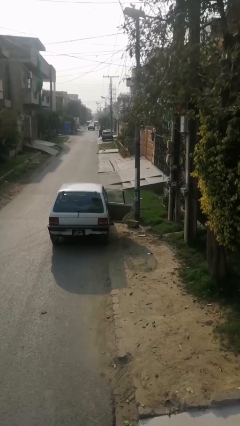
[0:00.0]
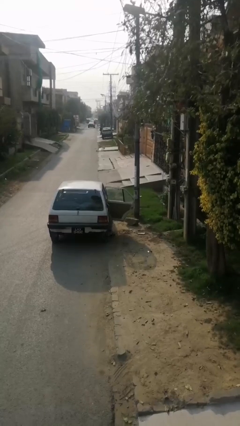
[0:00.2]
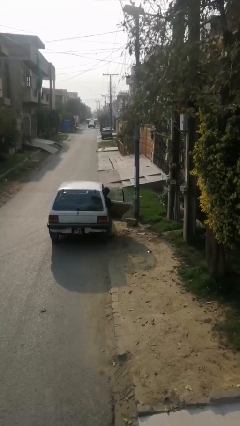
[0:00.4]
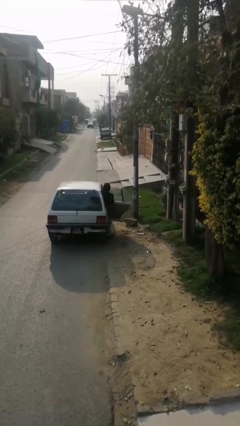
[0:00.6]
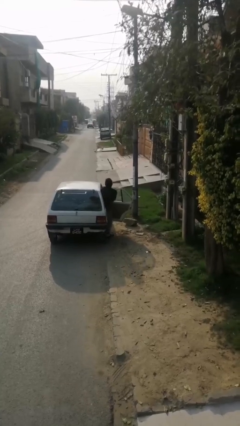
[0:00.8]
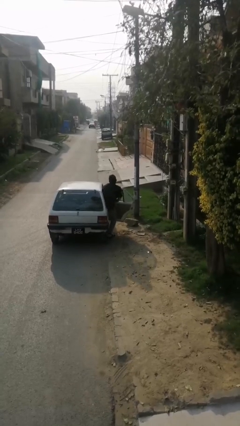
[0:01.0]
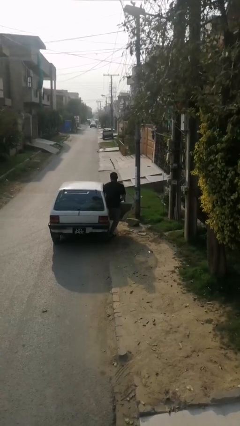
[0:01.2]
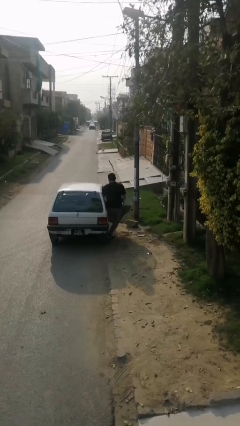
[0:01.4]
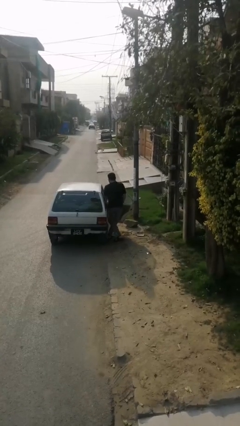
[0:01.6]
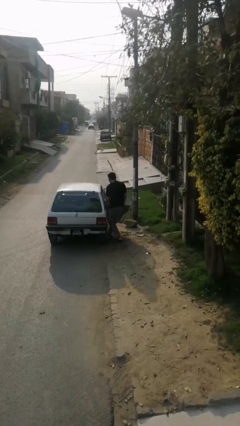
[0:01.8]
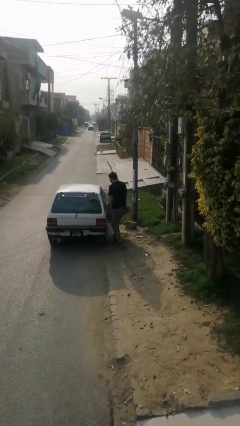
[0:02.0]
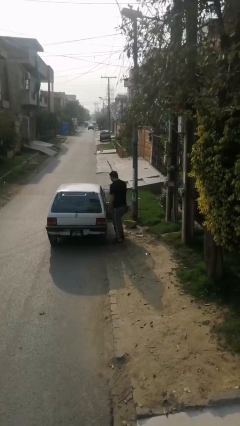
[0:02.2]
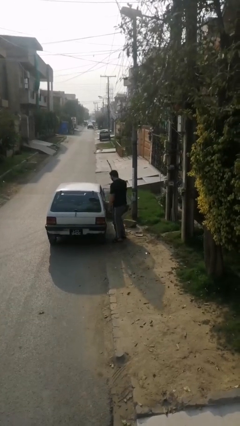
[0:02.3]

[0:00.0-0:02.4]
person exits car

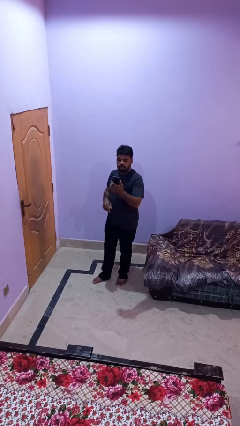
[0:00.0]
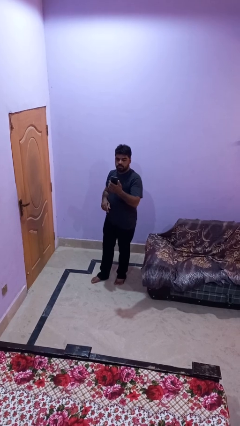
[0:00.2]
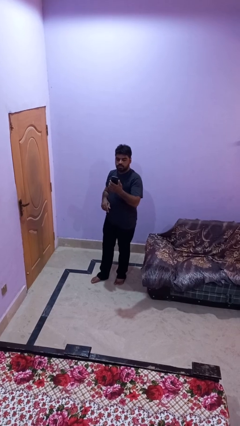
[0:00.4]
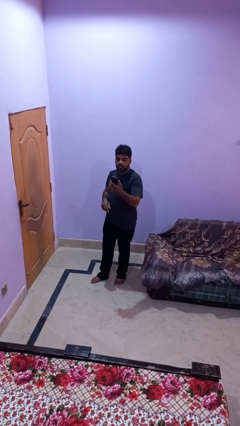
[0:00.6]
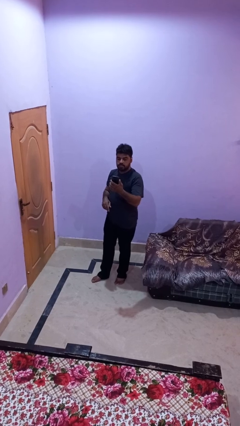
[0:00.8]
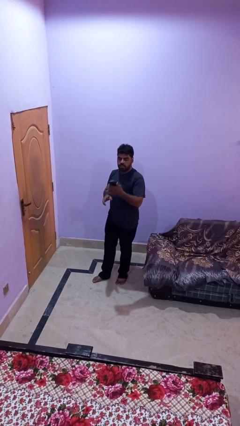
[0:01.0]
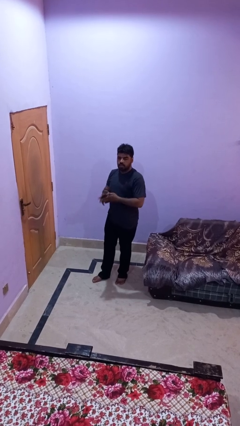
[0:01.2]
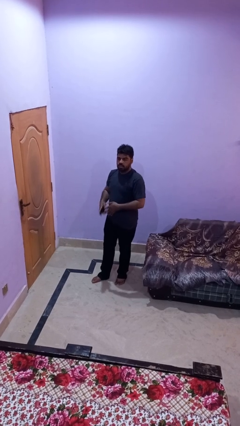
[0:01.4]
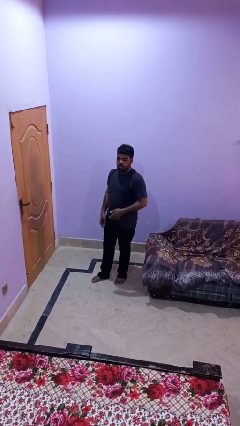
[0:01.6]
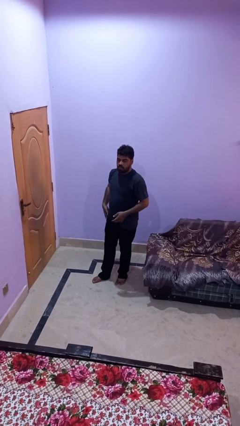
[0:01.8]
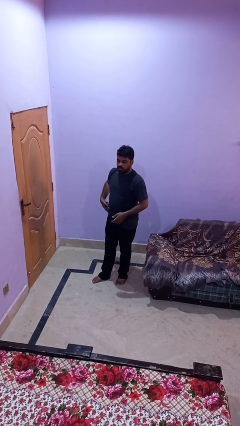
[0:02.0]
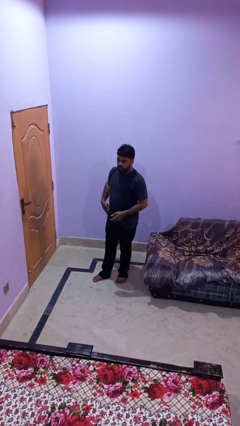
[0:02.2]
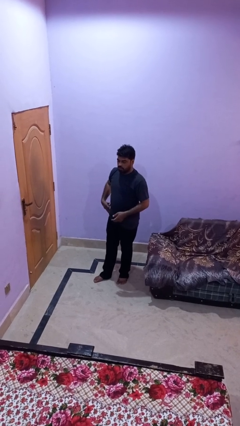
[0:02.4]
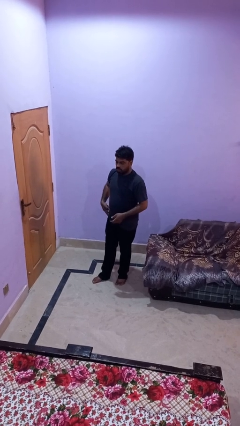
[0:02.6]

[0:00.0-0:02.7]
person puts phone into pocket

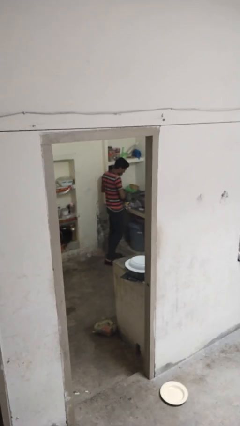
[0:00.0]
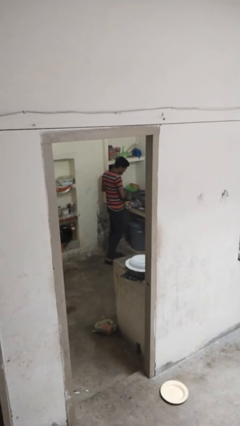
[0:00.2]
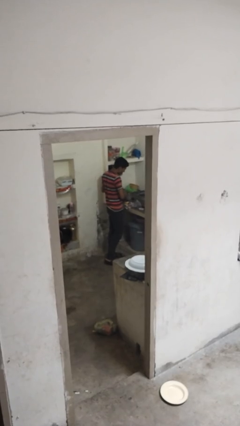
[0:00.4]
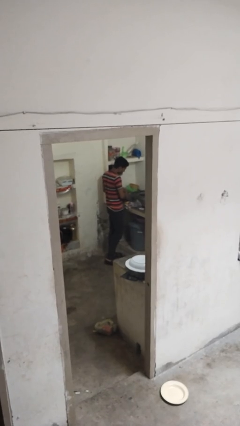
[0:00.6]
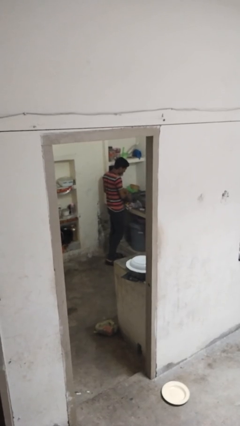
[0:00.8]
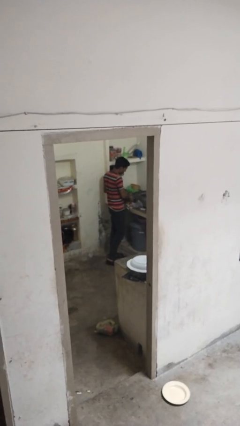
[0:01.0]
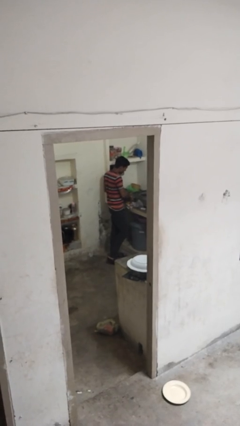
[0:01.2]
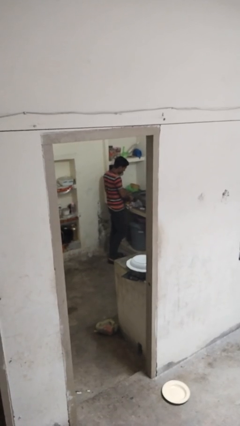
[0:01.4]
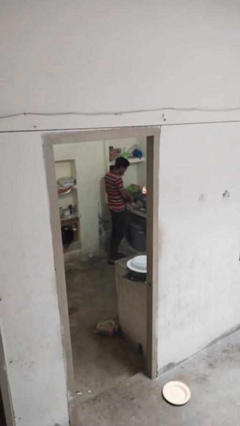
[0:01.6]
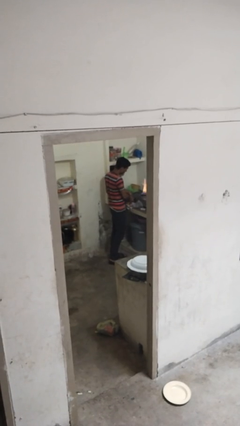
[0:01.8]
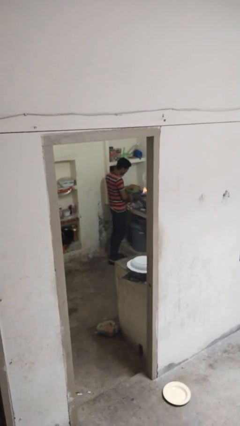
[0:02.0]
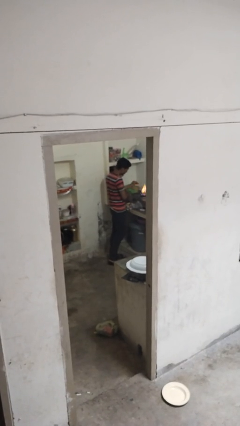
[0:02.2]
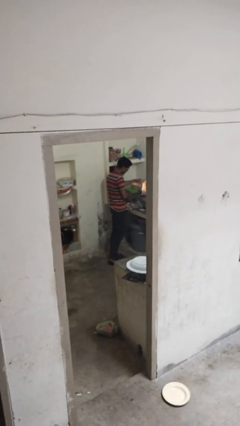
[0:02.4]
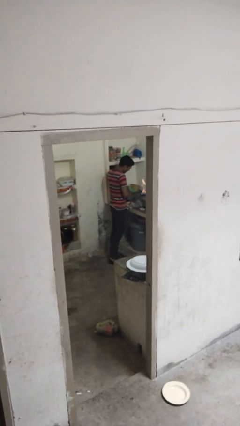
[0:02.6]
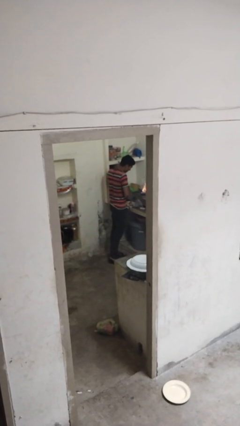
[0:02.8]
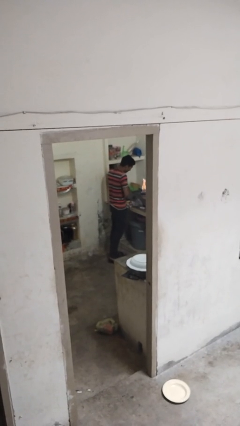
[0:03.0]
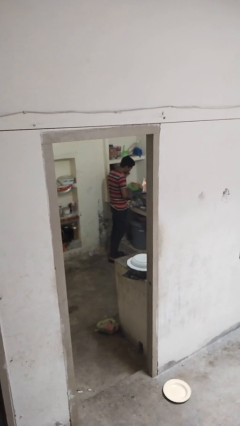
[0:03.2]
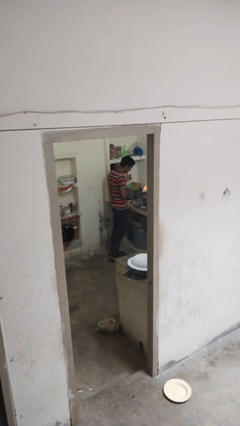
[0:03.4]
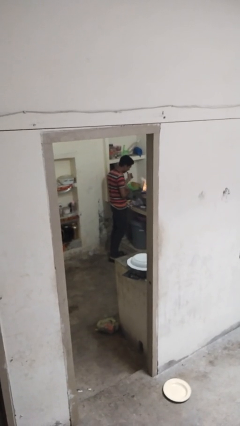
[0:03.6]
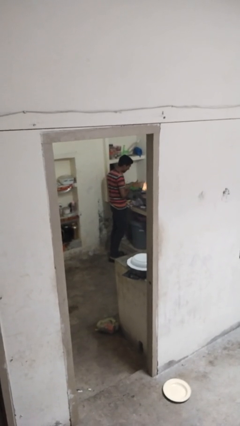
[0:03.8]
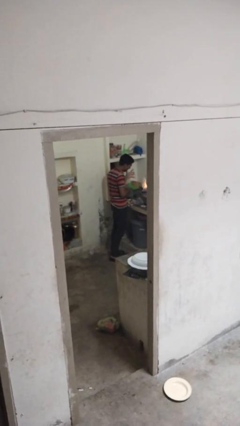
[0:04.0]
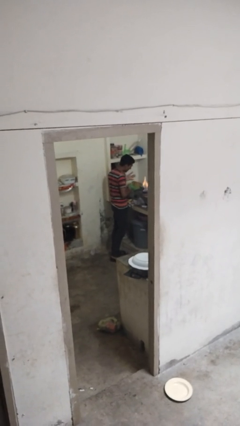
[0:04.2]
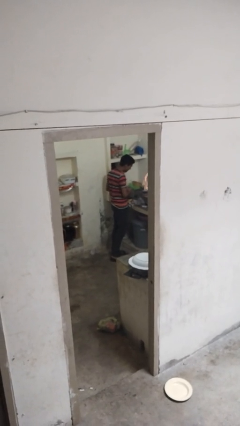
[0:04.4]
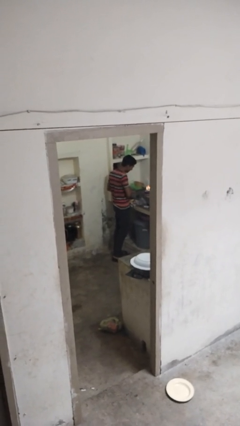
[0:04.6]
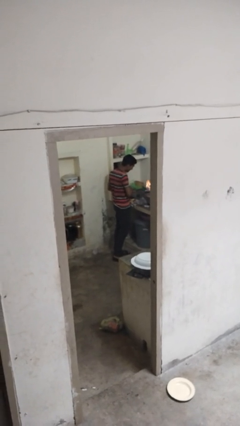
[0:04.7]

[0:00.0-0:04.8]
person burns hand

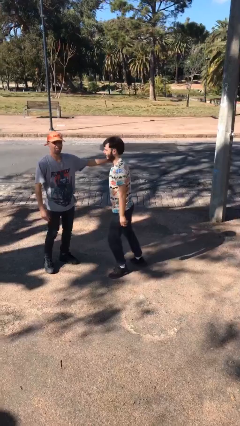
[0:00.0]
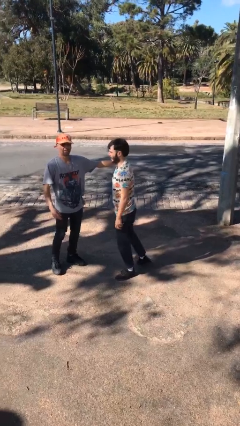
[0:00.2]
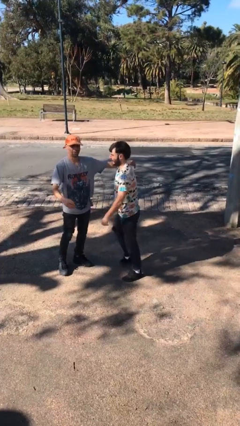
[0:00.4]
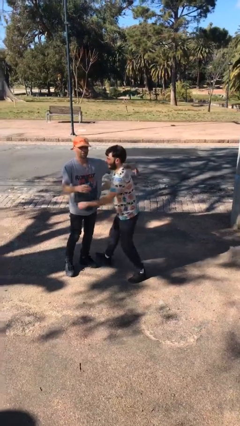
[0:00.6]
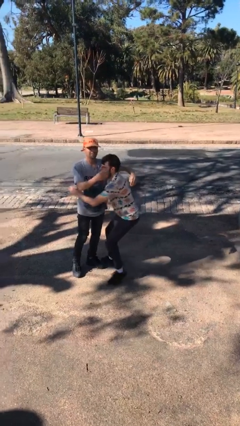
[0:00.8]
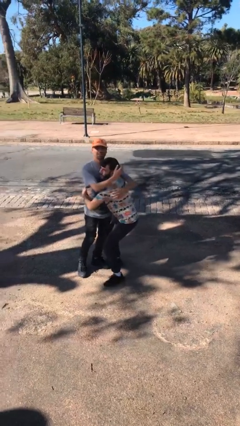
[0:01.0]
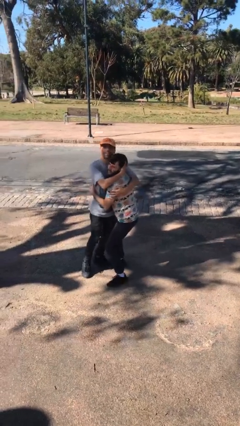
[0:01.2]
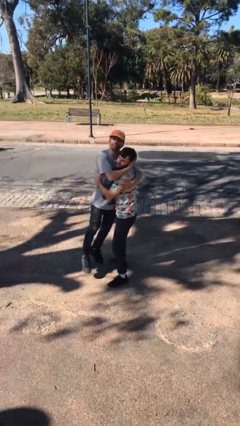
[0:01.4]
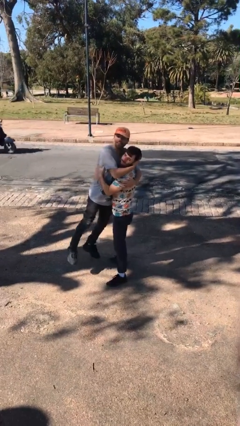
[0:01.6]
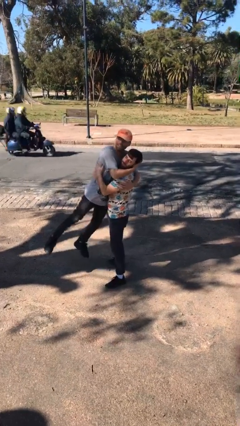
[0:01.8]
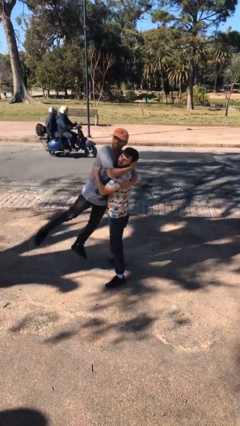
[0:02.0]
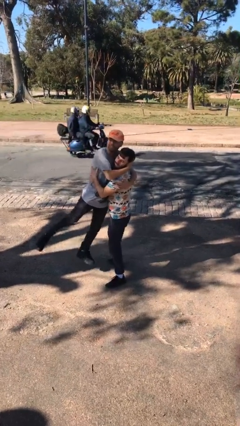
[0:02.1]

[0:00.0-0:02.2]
person picks up person

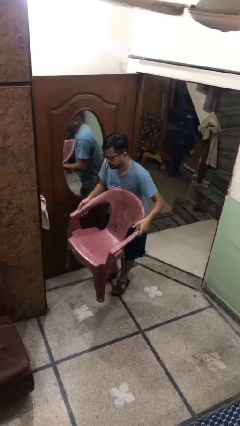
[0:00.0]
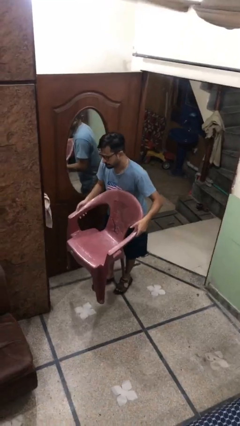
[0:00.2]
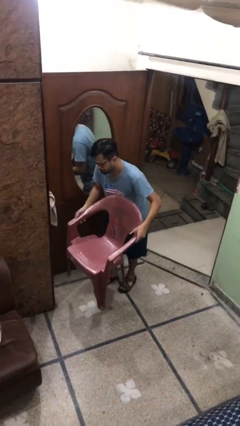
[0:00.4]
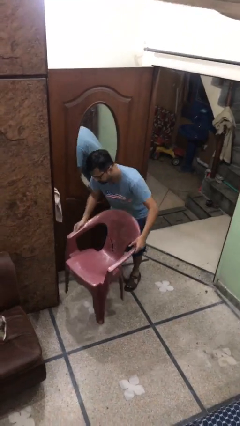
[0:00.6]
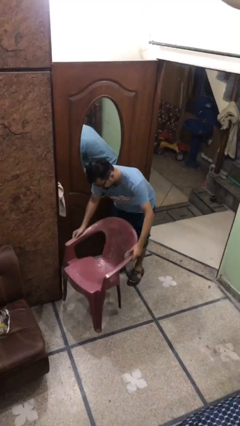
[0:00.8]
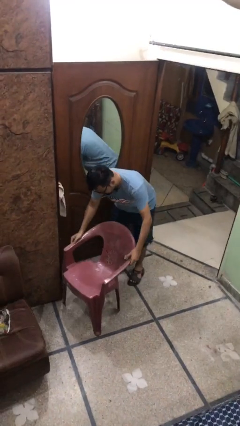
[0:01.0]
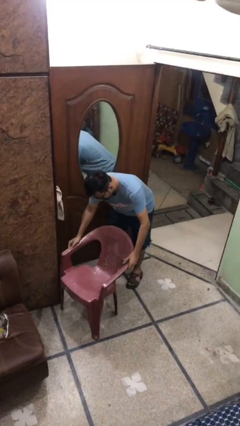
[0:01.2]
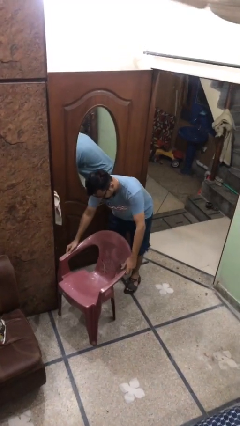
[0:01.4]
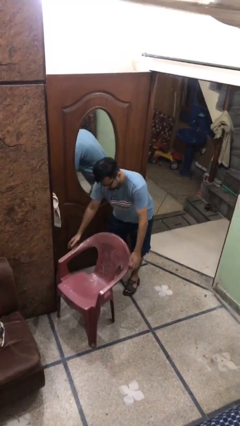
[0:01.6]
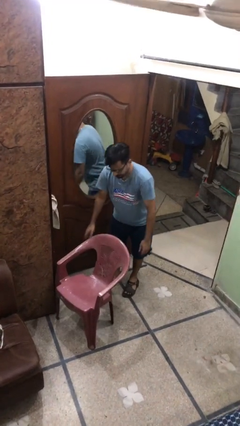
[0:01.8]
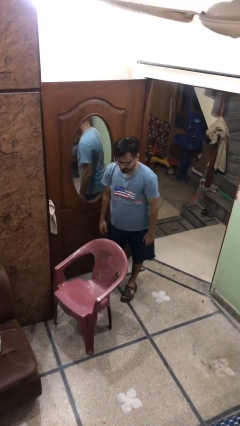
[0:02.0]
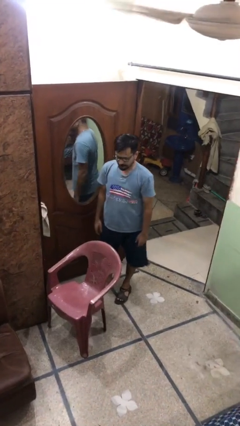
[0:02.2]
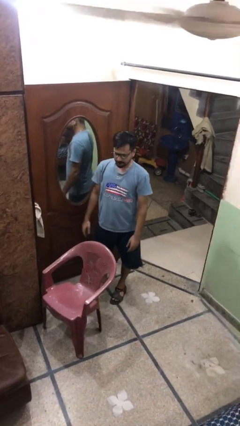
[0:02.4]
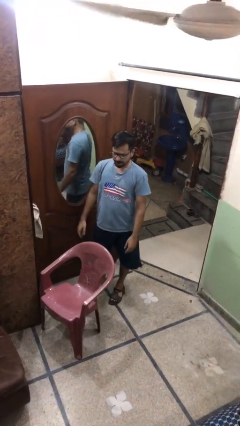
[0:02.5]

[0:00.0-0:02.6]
person puts down object on floor

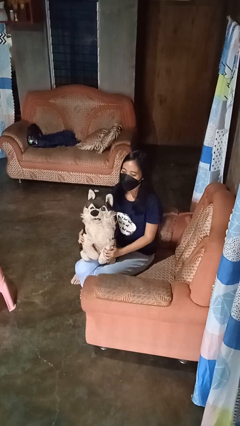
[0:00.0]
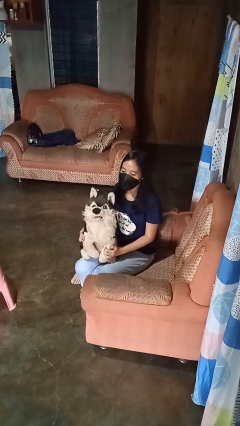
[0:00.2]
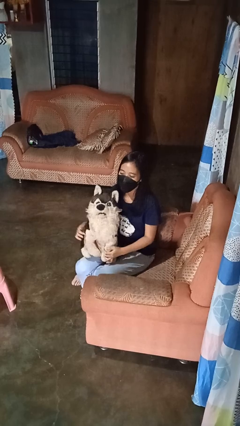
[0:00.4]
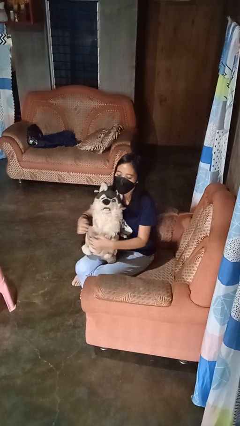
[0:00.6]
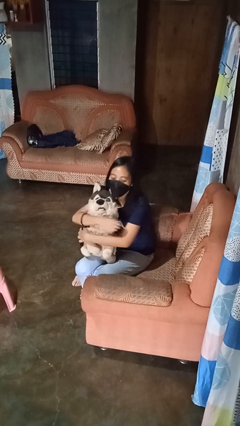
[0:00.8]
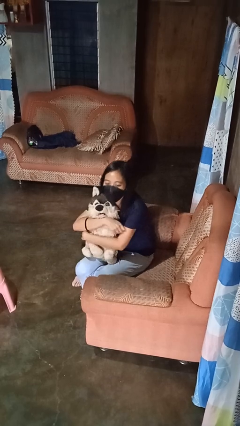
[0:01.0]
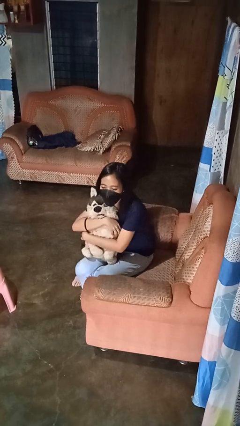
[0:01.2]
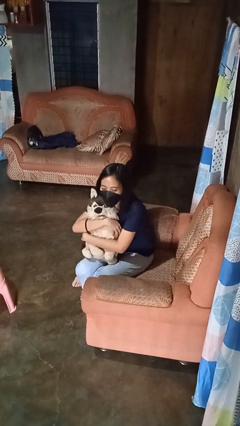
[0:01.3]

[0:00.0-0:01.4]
person hugs stuffed animal

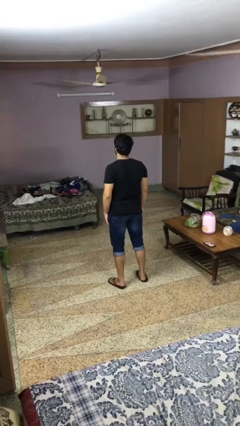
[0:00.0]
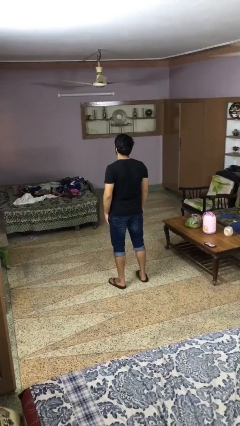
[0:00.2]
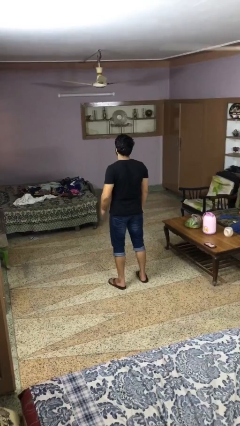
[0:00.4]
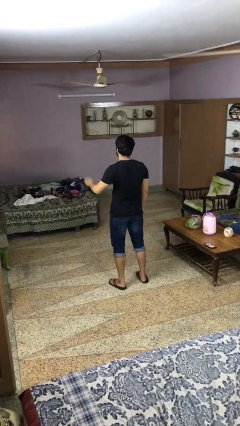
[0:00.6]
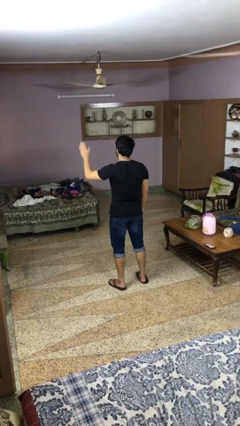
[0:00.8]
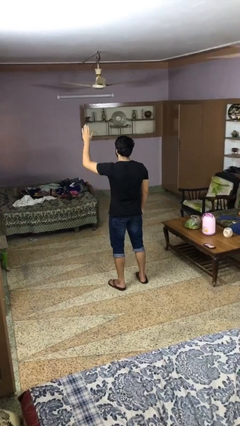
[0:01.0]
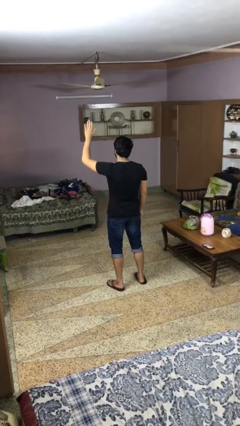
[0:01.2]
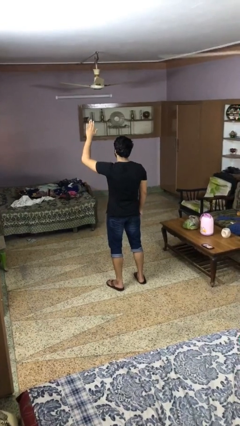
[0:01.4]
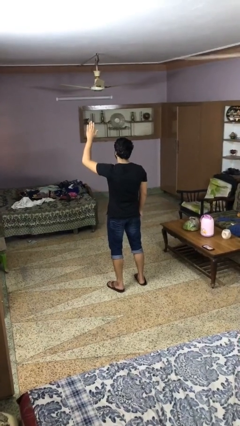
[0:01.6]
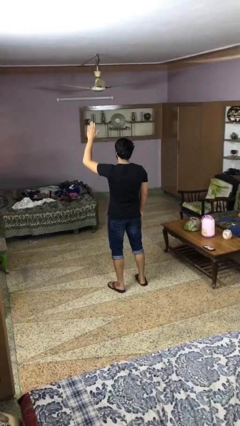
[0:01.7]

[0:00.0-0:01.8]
person gestures raise hand
